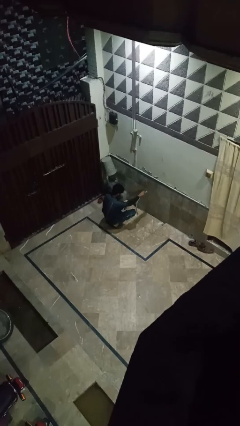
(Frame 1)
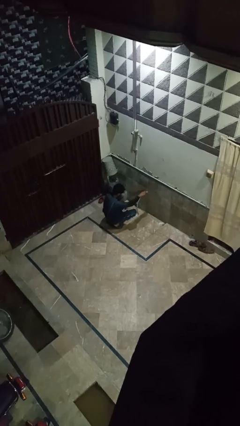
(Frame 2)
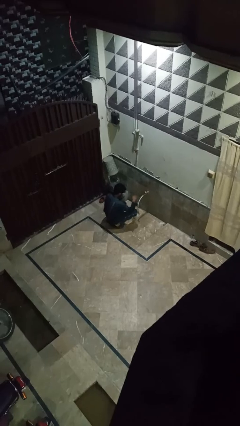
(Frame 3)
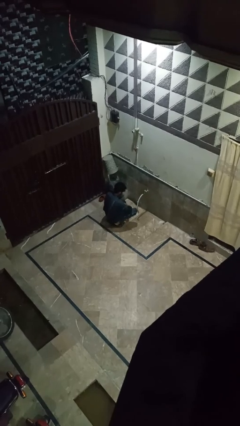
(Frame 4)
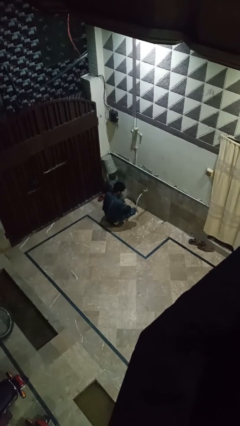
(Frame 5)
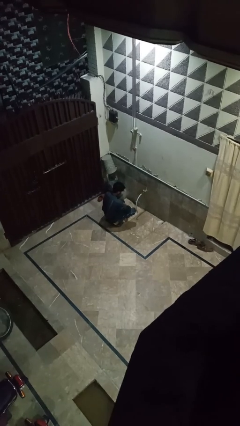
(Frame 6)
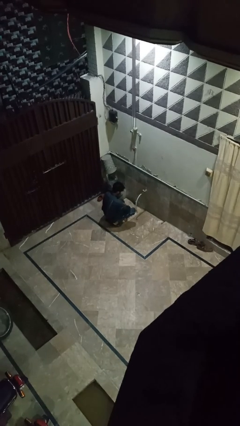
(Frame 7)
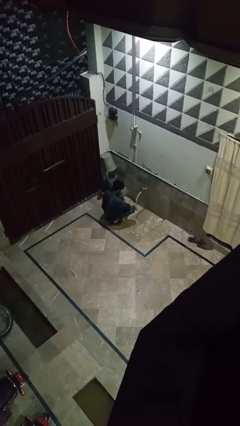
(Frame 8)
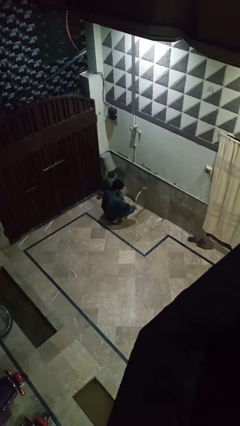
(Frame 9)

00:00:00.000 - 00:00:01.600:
person turns off faucet

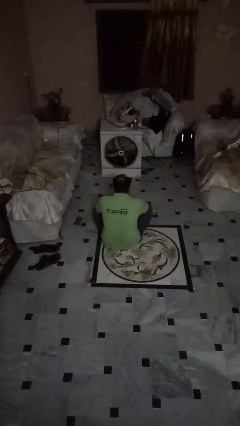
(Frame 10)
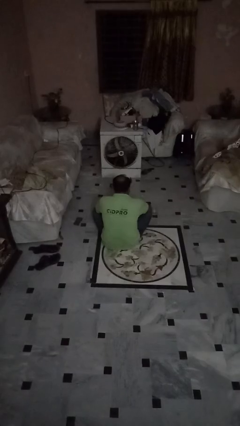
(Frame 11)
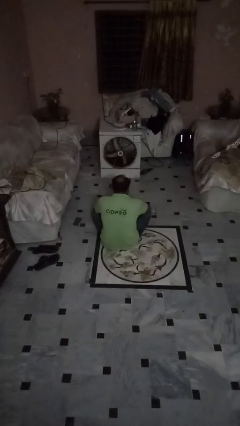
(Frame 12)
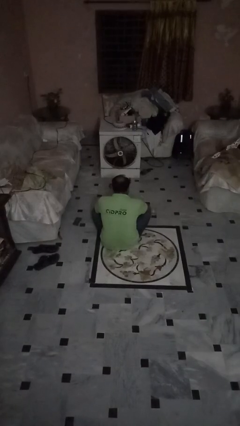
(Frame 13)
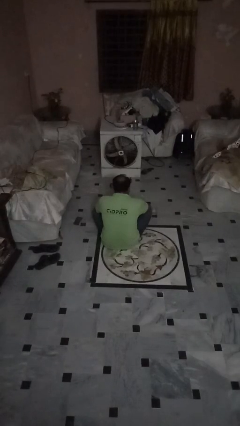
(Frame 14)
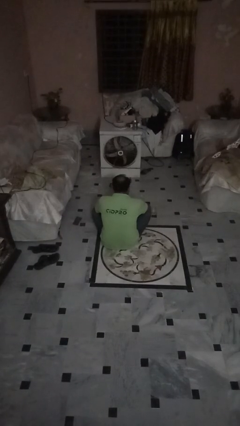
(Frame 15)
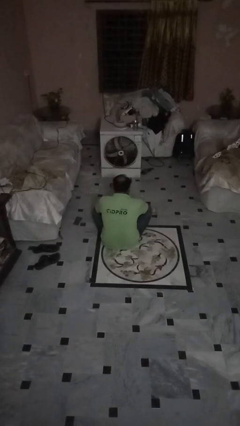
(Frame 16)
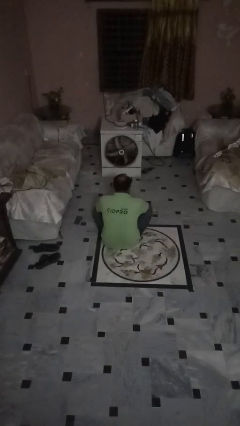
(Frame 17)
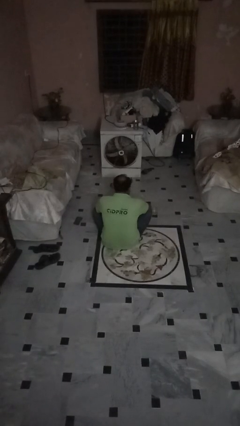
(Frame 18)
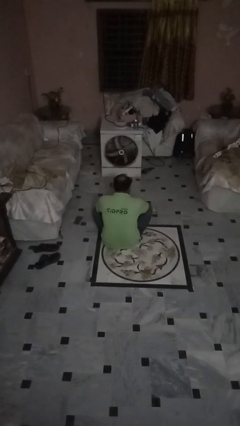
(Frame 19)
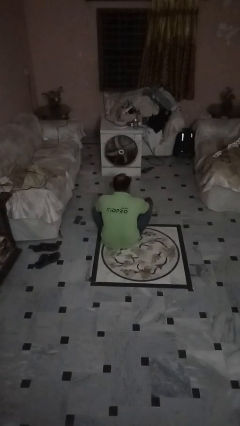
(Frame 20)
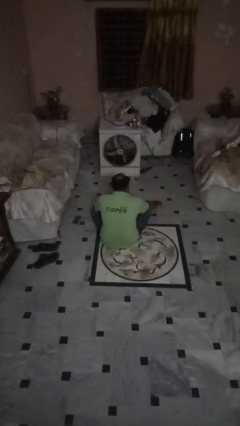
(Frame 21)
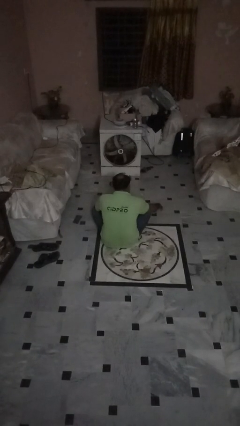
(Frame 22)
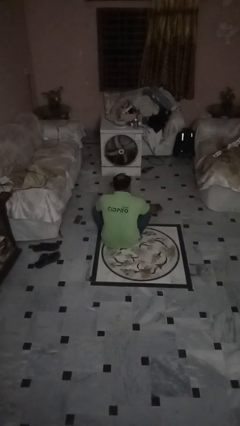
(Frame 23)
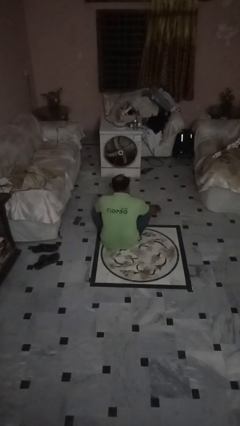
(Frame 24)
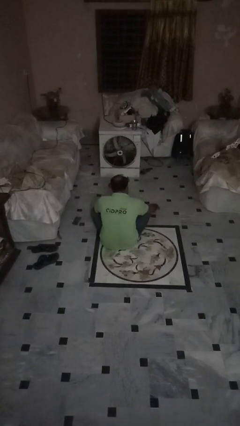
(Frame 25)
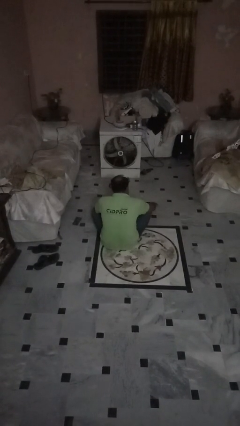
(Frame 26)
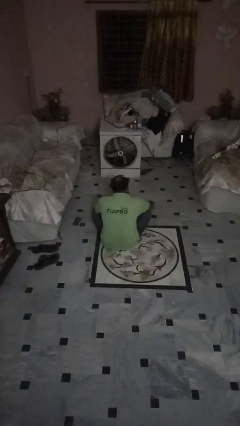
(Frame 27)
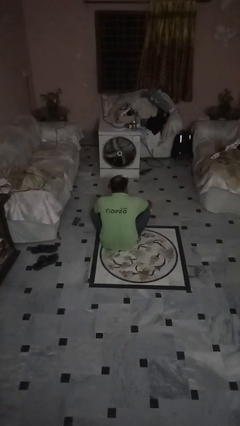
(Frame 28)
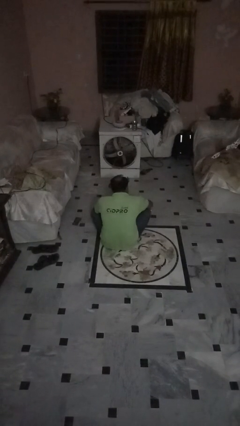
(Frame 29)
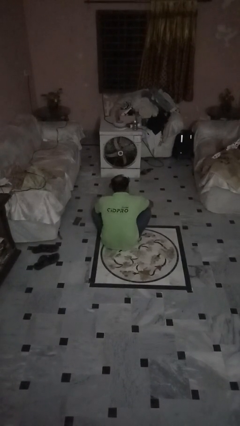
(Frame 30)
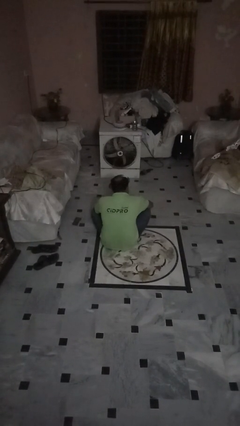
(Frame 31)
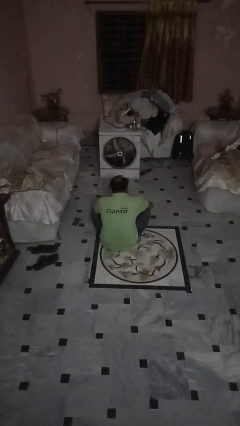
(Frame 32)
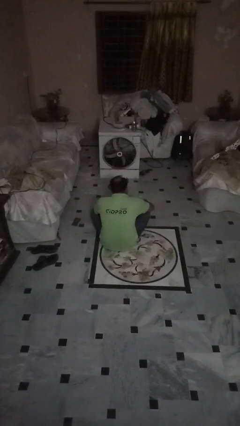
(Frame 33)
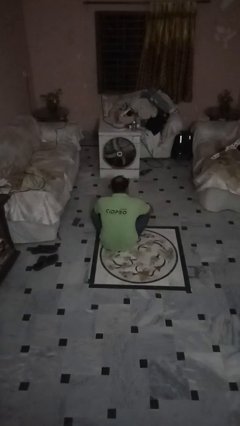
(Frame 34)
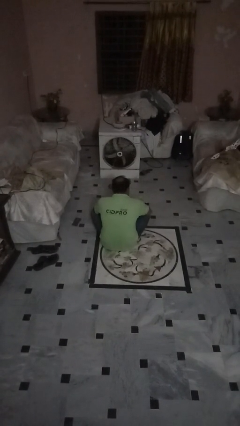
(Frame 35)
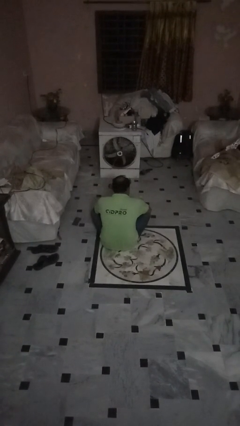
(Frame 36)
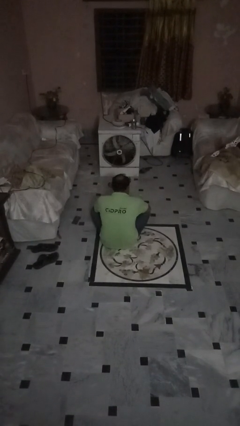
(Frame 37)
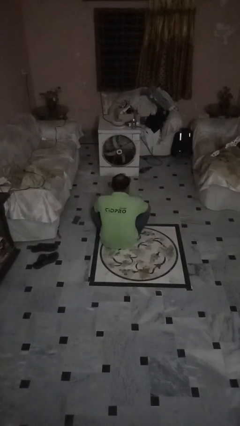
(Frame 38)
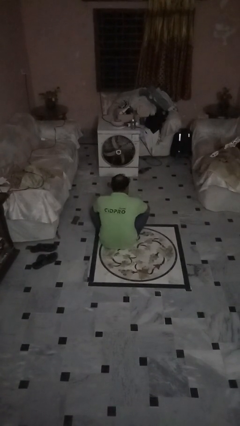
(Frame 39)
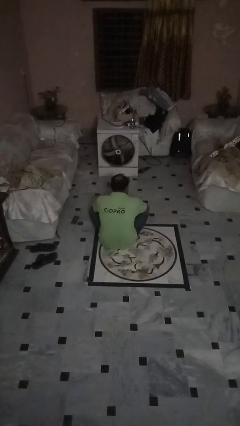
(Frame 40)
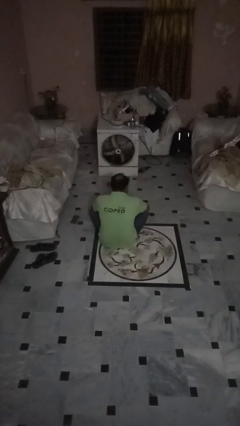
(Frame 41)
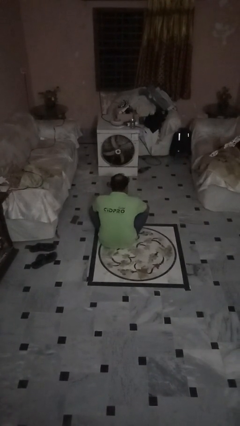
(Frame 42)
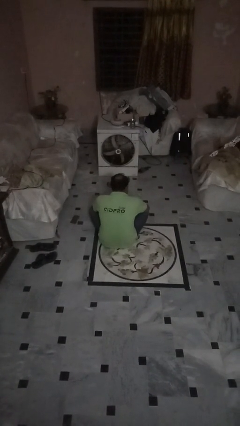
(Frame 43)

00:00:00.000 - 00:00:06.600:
person spills on floor

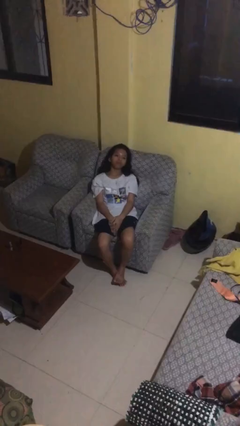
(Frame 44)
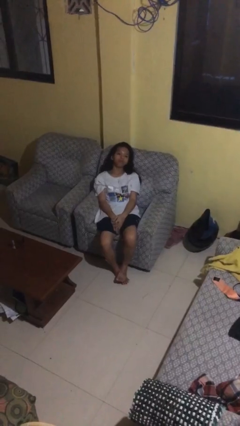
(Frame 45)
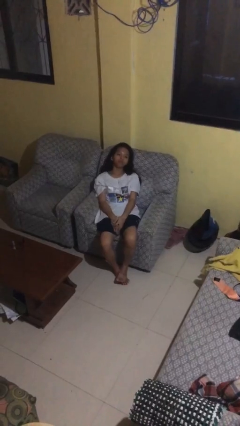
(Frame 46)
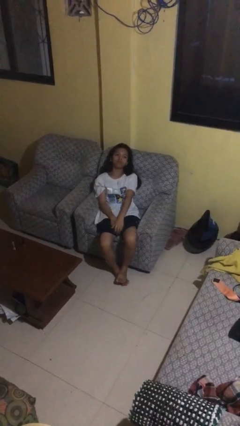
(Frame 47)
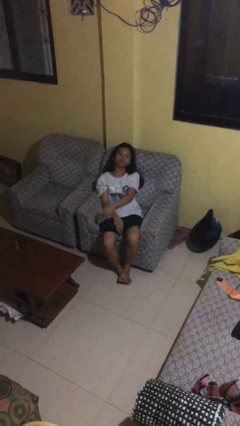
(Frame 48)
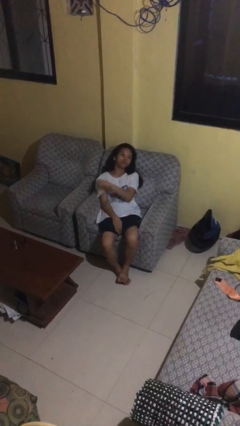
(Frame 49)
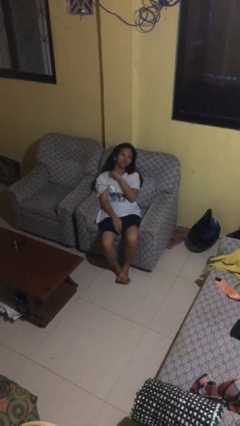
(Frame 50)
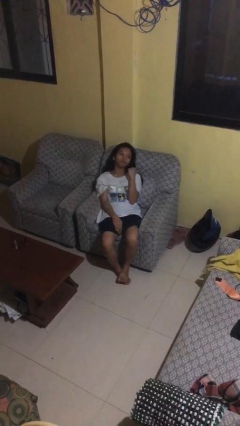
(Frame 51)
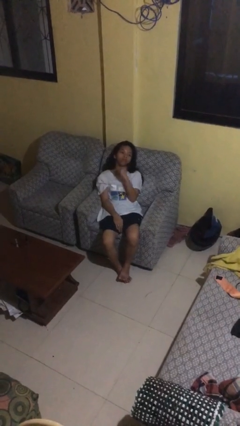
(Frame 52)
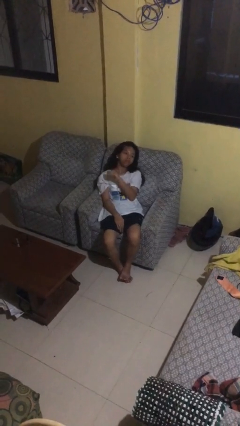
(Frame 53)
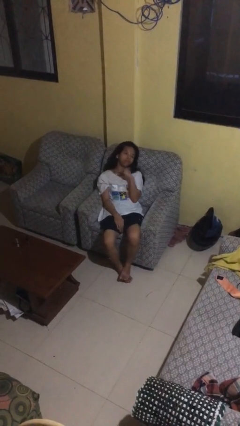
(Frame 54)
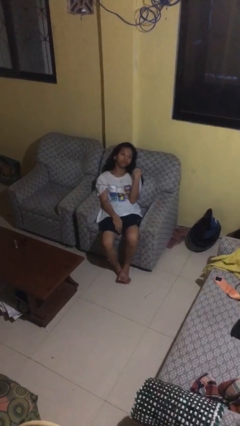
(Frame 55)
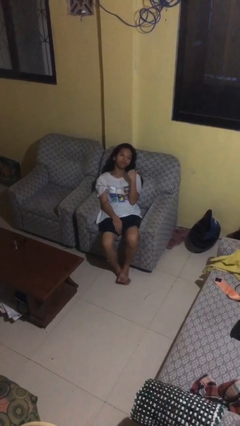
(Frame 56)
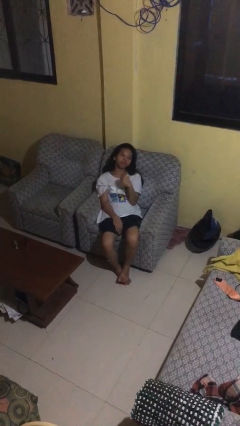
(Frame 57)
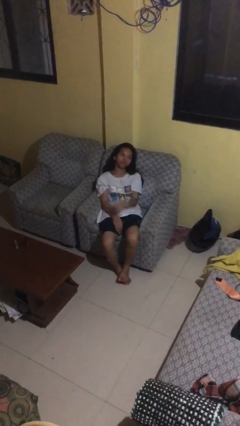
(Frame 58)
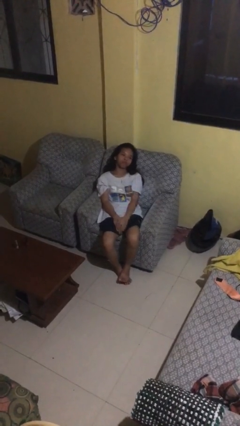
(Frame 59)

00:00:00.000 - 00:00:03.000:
person gestures cut

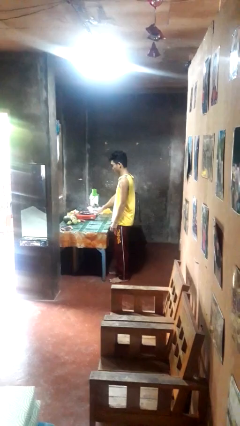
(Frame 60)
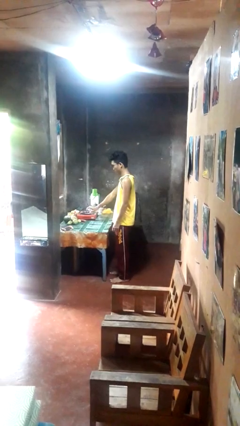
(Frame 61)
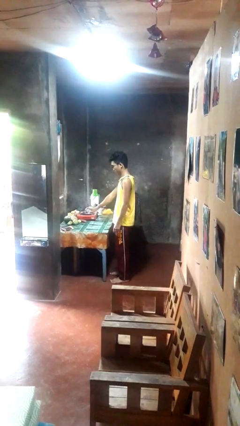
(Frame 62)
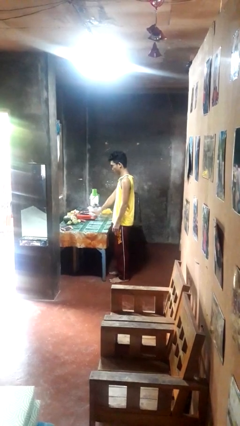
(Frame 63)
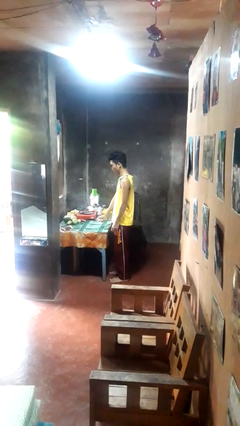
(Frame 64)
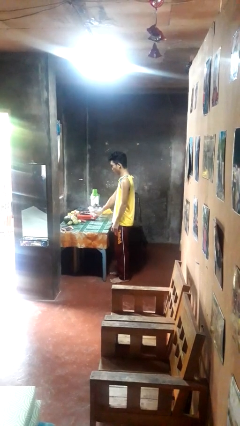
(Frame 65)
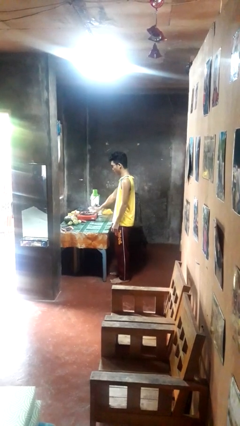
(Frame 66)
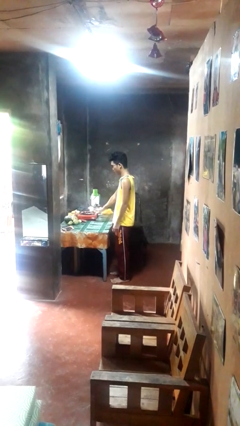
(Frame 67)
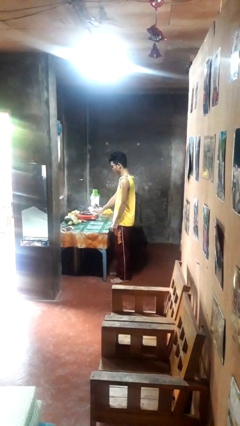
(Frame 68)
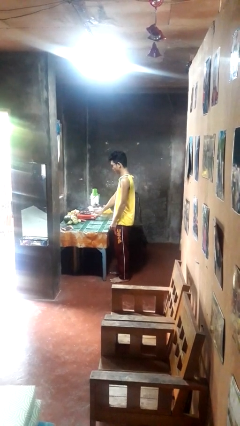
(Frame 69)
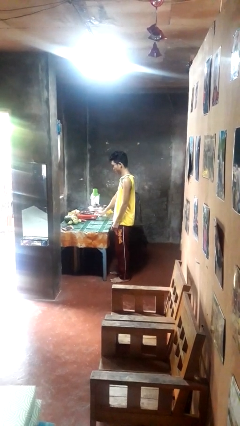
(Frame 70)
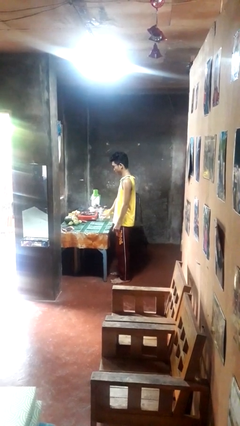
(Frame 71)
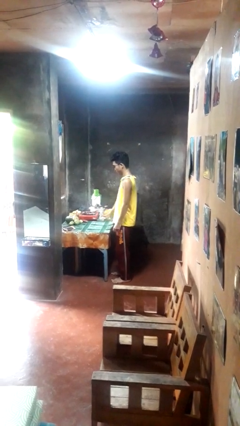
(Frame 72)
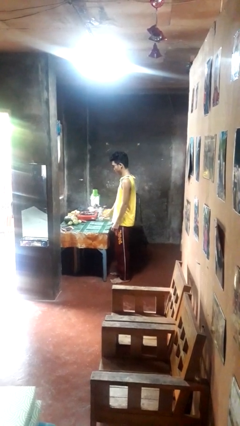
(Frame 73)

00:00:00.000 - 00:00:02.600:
person sprays from bottle

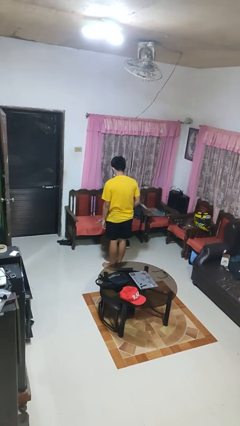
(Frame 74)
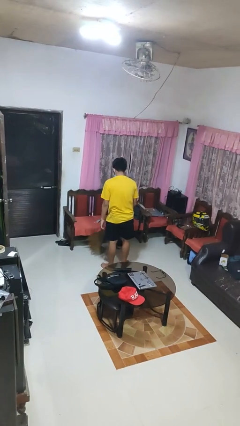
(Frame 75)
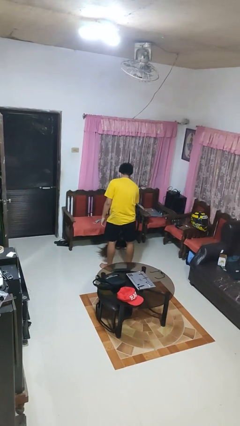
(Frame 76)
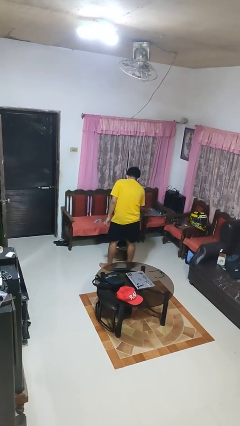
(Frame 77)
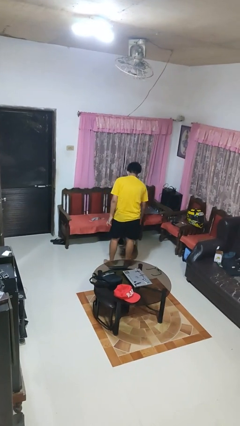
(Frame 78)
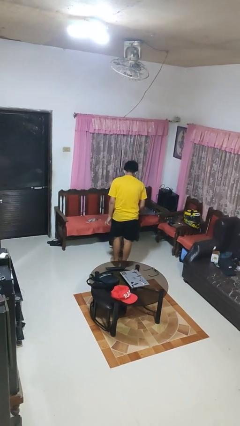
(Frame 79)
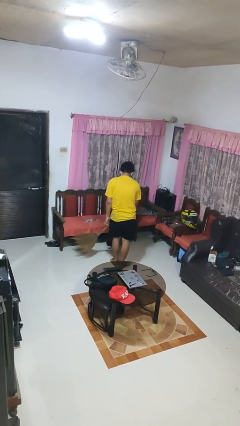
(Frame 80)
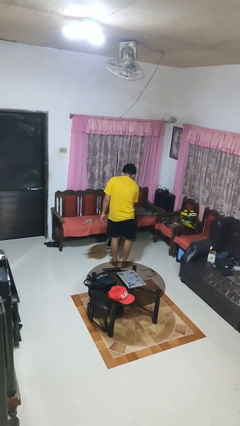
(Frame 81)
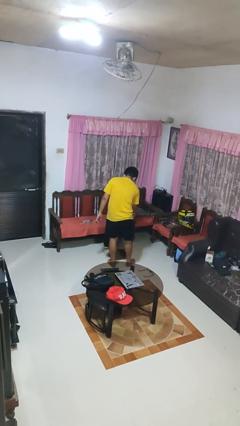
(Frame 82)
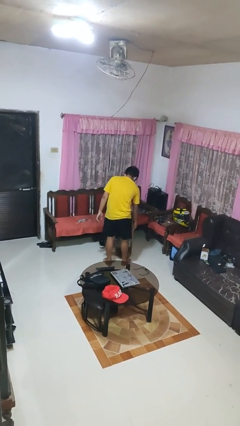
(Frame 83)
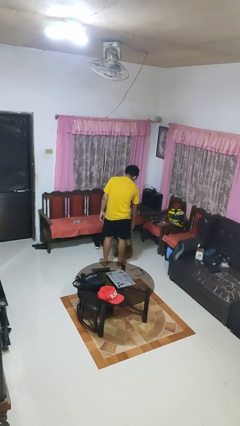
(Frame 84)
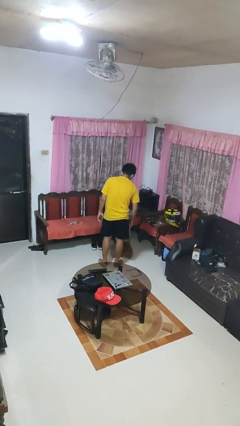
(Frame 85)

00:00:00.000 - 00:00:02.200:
person sweeps floor

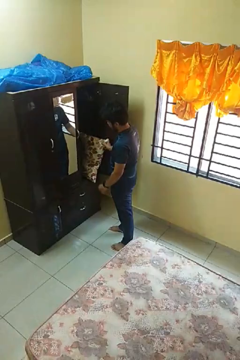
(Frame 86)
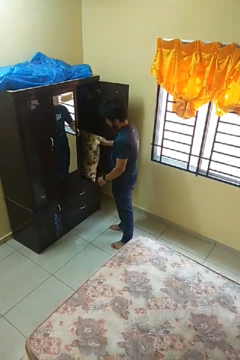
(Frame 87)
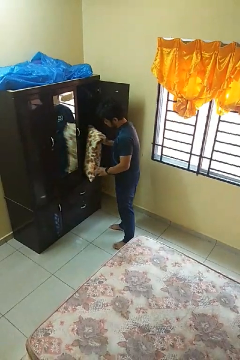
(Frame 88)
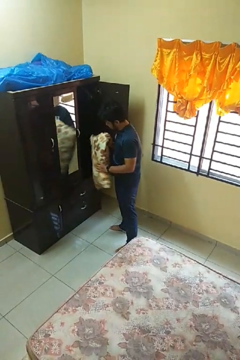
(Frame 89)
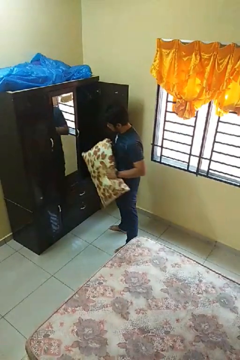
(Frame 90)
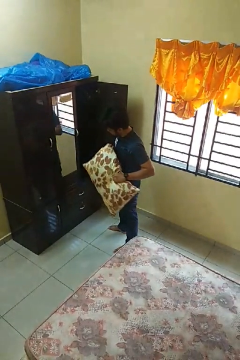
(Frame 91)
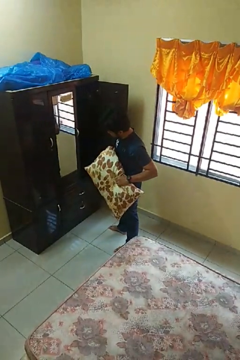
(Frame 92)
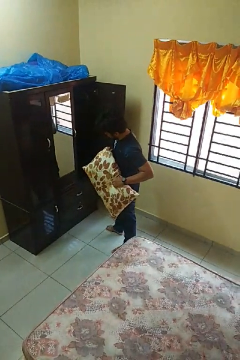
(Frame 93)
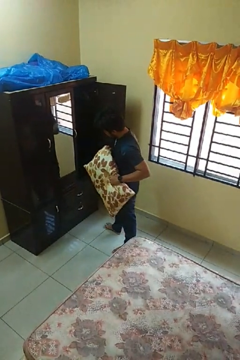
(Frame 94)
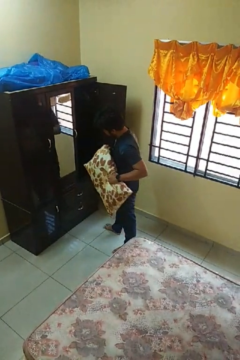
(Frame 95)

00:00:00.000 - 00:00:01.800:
person picks up object from cabinet
